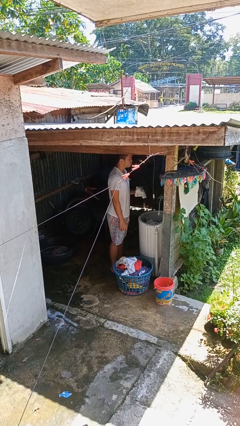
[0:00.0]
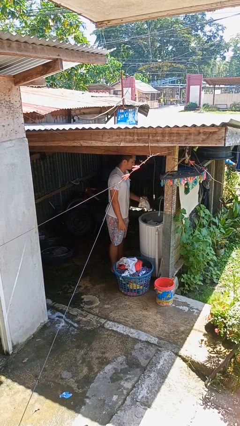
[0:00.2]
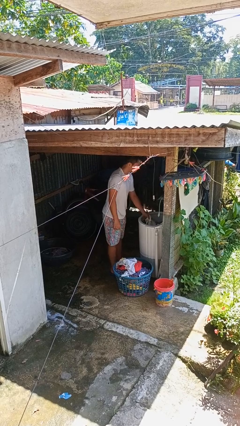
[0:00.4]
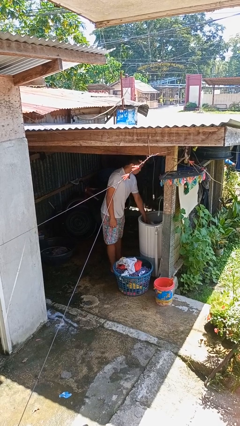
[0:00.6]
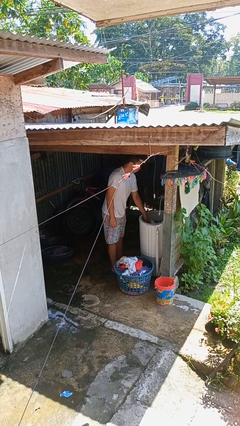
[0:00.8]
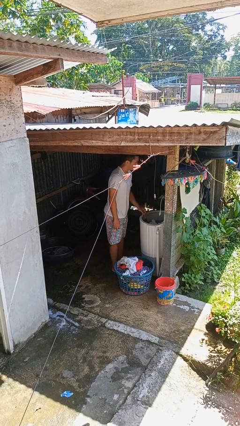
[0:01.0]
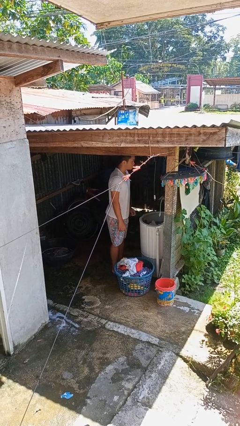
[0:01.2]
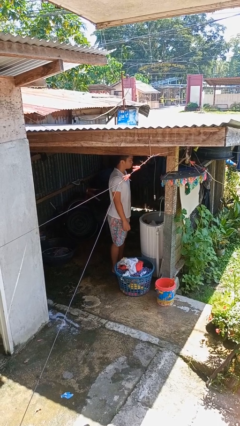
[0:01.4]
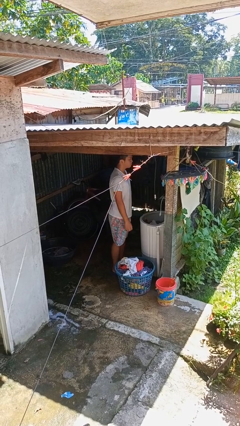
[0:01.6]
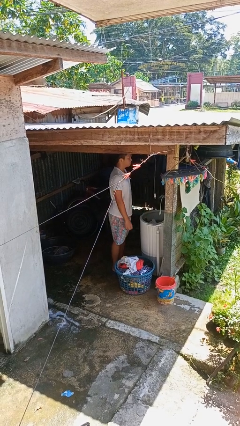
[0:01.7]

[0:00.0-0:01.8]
person loads clotheswasher

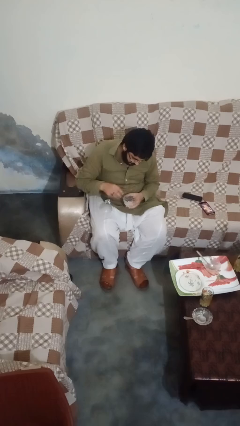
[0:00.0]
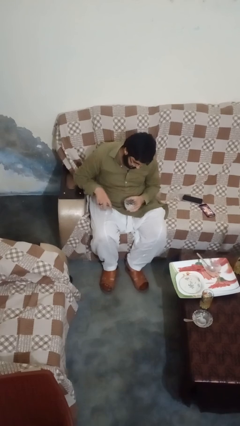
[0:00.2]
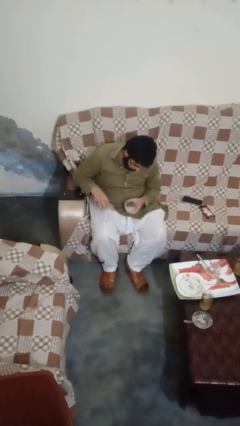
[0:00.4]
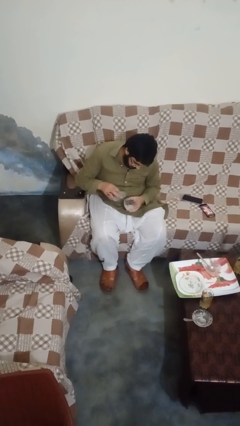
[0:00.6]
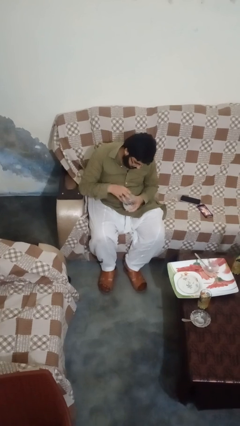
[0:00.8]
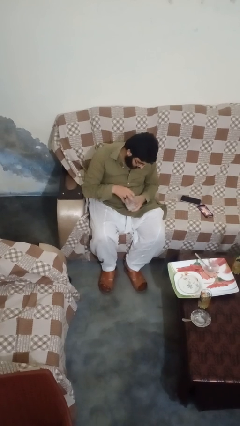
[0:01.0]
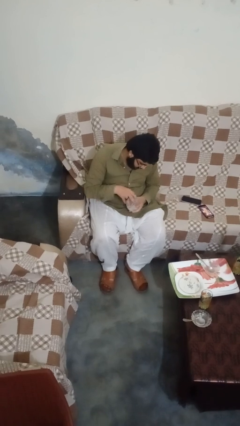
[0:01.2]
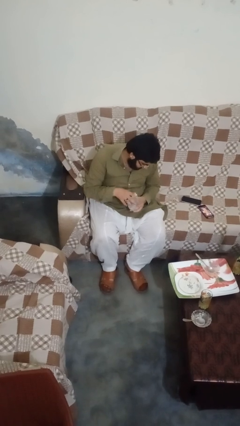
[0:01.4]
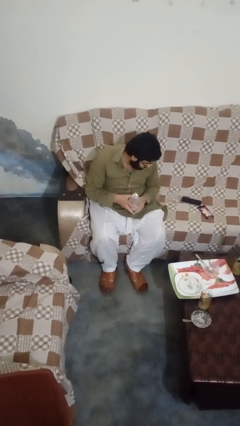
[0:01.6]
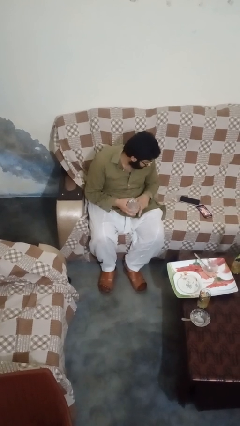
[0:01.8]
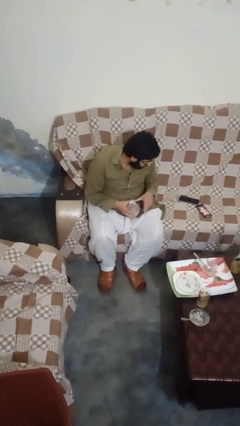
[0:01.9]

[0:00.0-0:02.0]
person closes jewelry box

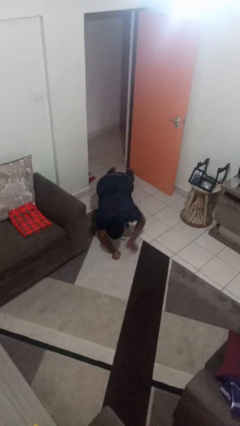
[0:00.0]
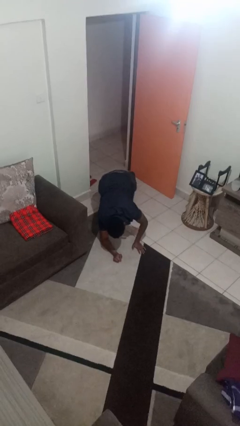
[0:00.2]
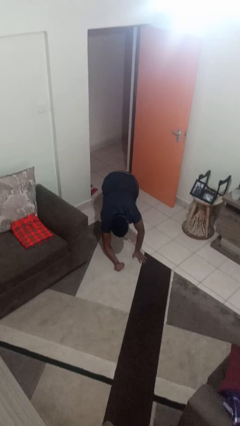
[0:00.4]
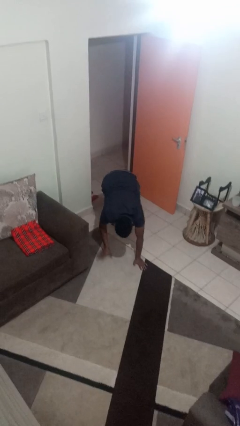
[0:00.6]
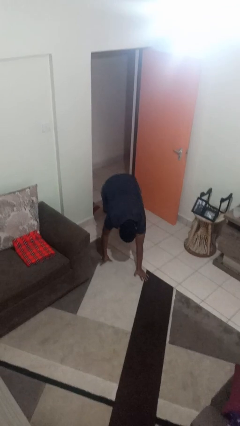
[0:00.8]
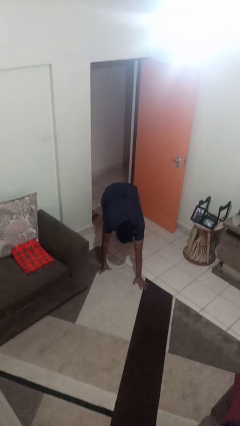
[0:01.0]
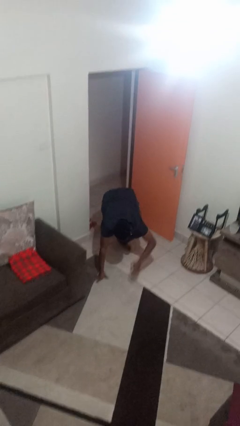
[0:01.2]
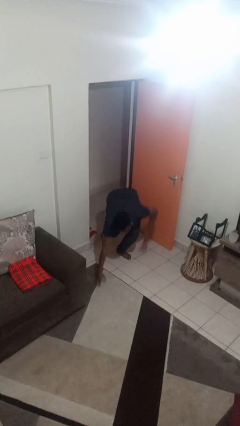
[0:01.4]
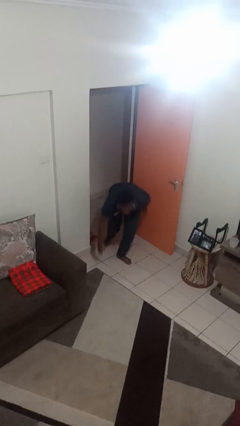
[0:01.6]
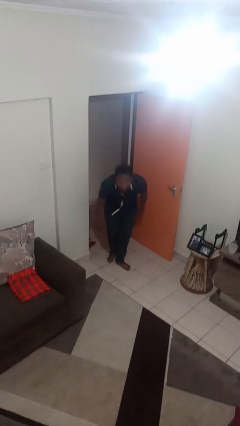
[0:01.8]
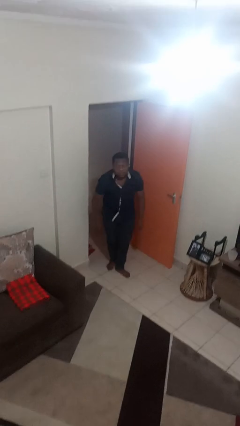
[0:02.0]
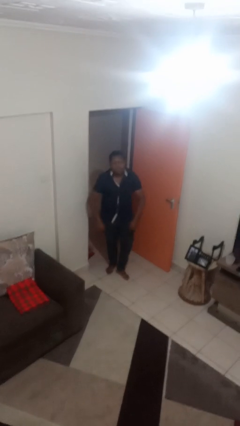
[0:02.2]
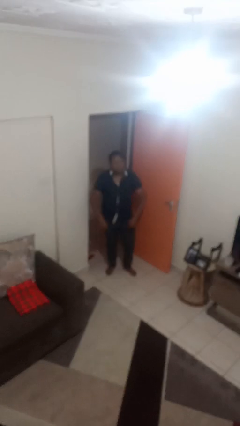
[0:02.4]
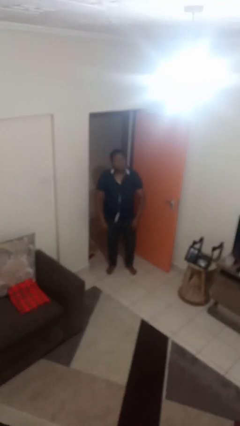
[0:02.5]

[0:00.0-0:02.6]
person stands up from floor

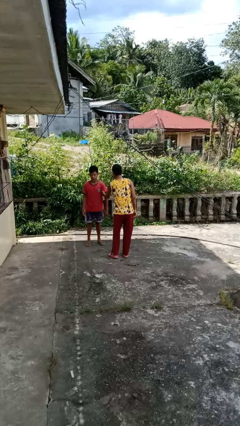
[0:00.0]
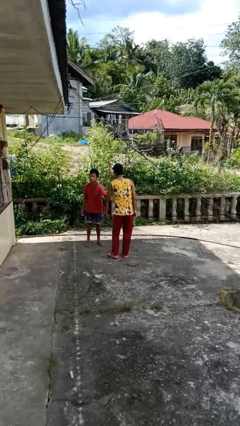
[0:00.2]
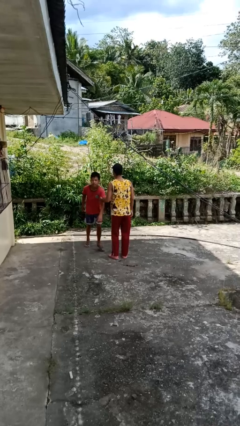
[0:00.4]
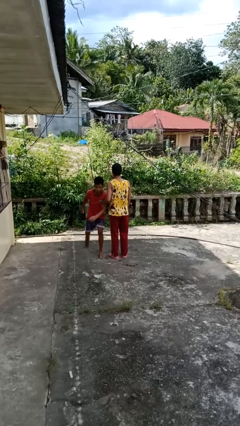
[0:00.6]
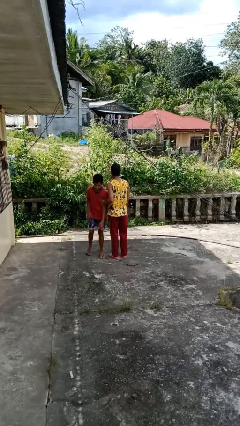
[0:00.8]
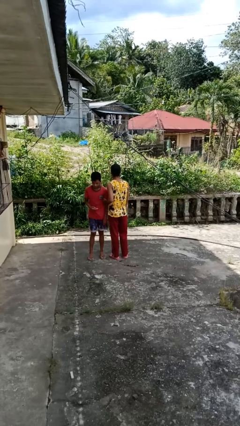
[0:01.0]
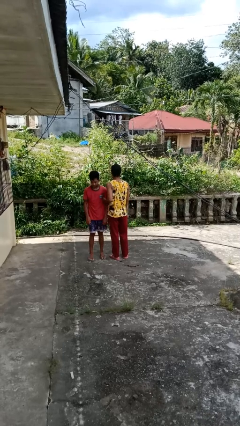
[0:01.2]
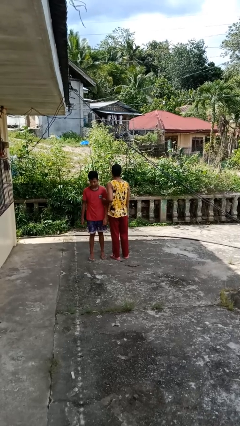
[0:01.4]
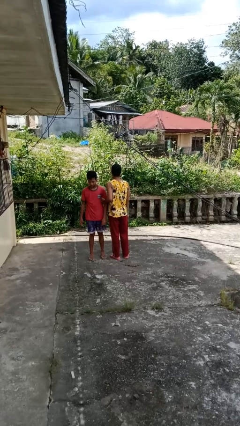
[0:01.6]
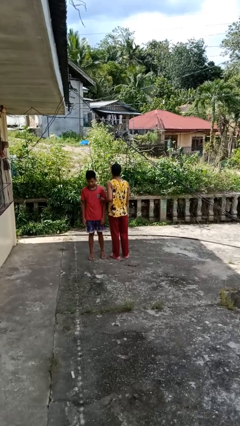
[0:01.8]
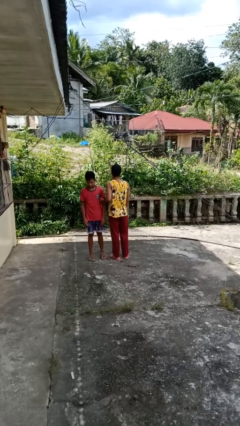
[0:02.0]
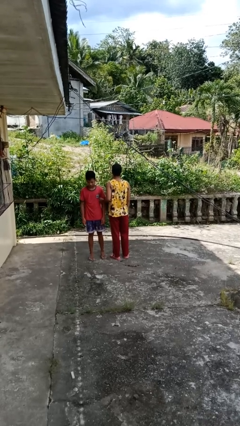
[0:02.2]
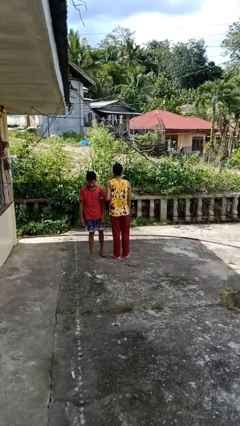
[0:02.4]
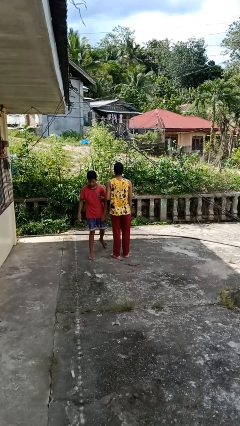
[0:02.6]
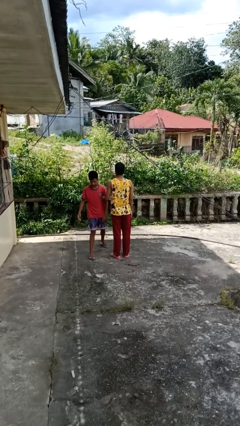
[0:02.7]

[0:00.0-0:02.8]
person grabs person by bicep

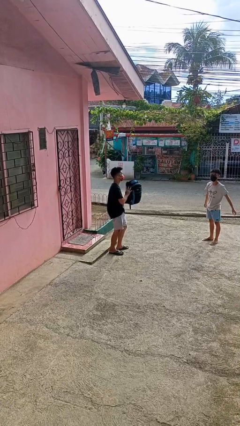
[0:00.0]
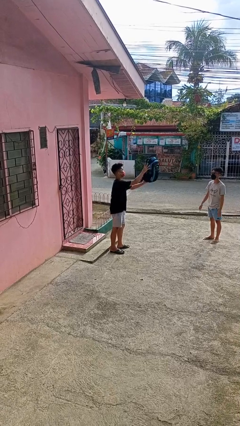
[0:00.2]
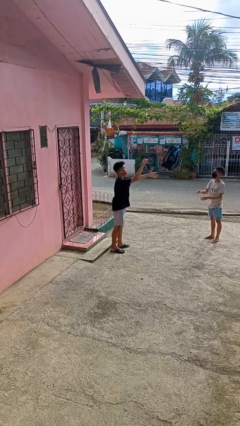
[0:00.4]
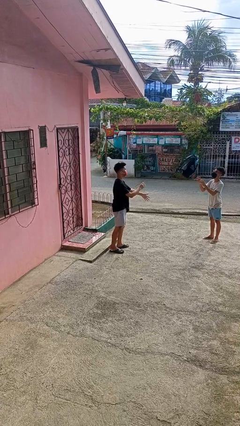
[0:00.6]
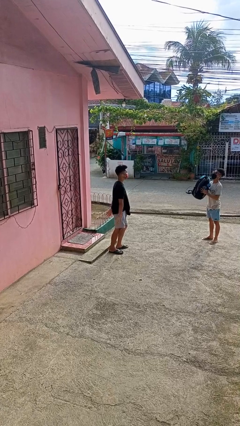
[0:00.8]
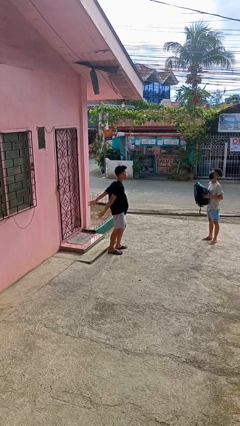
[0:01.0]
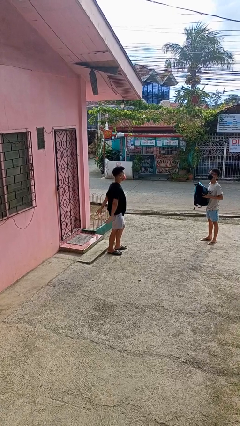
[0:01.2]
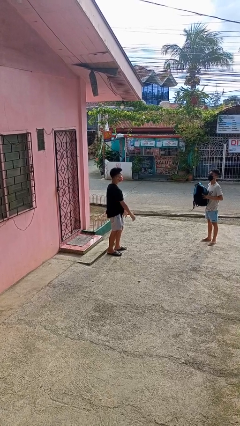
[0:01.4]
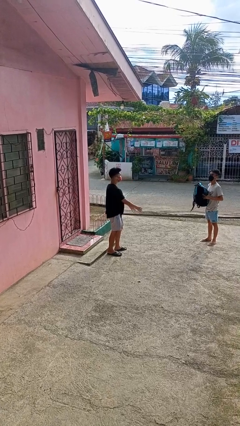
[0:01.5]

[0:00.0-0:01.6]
person throws object to person

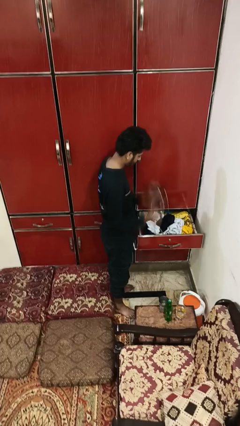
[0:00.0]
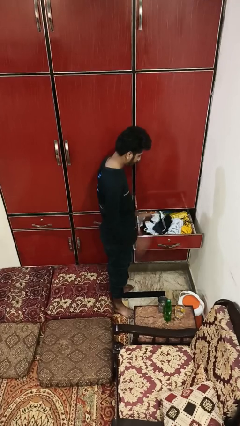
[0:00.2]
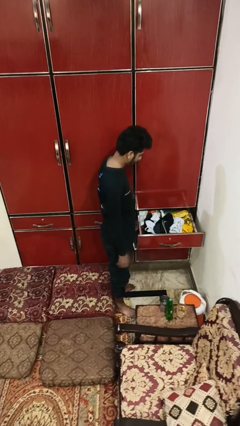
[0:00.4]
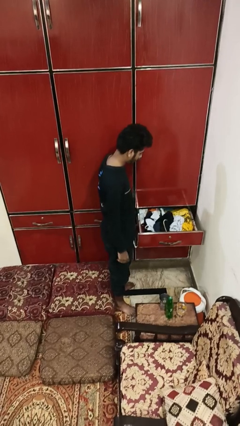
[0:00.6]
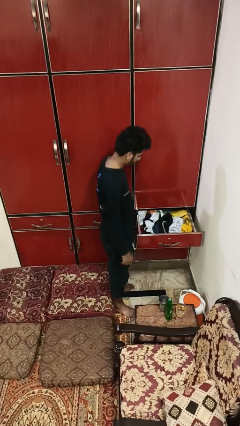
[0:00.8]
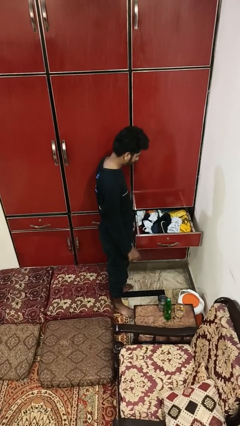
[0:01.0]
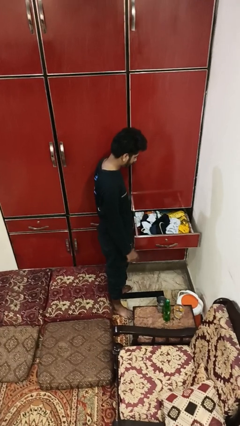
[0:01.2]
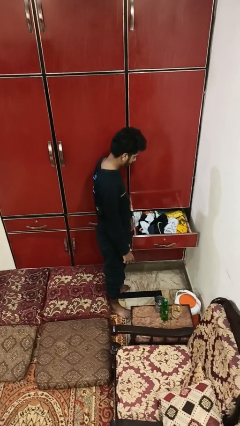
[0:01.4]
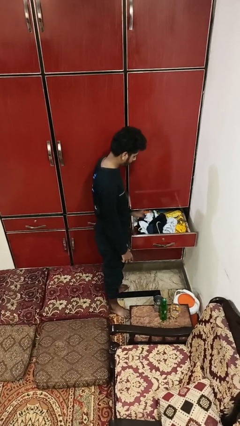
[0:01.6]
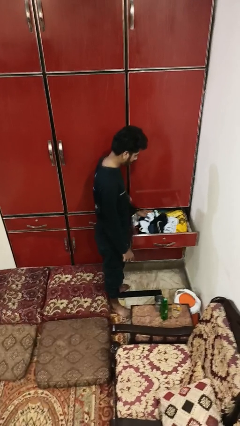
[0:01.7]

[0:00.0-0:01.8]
person puts clothes into dresser

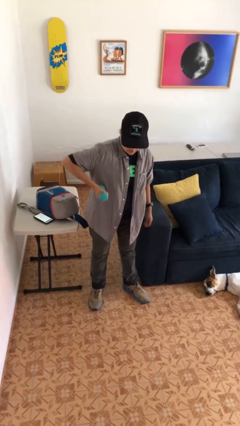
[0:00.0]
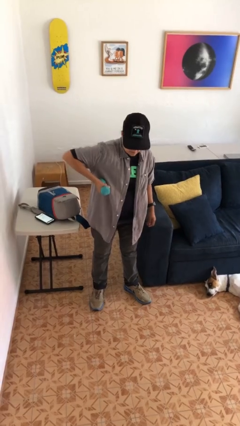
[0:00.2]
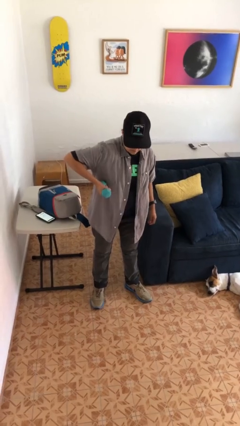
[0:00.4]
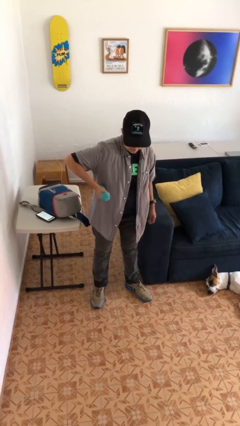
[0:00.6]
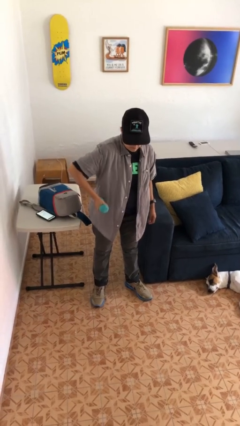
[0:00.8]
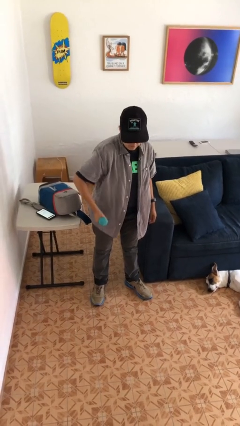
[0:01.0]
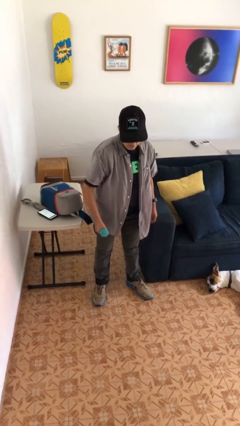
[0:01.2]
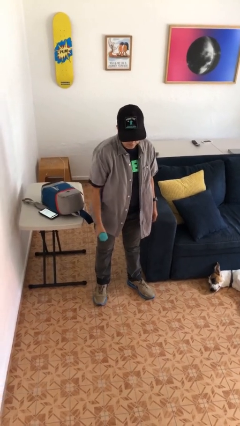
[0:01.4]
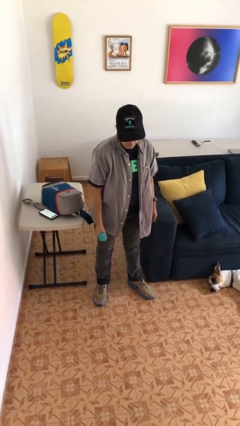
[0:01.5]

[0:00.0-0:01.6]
person lifts dumbbells

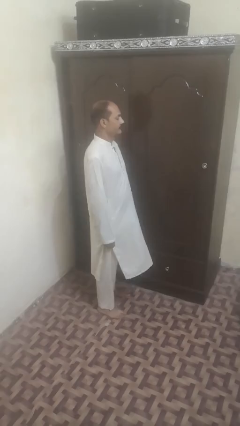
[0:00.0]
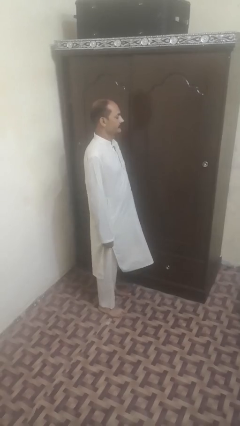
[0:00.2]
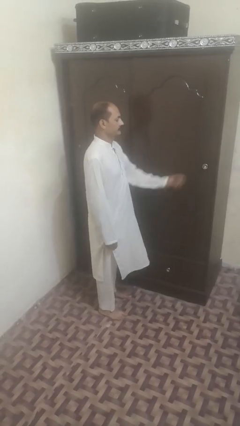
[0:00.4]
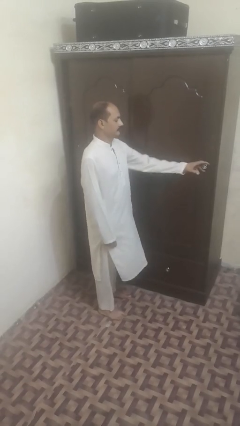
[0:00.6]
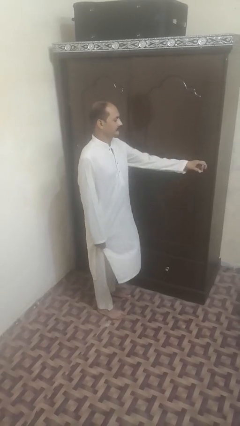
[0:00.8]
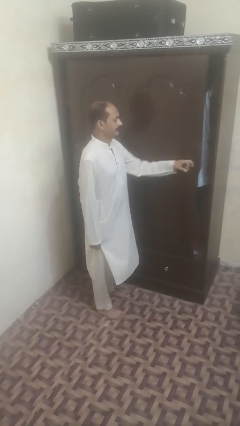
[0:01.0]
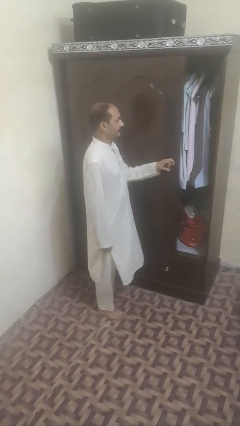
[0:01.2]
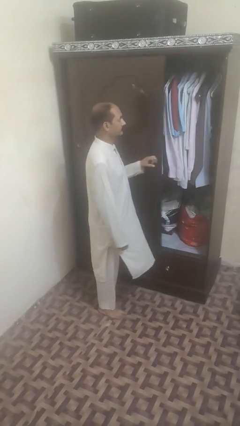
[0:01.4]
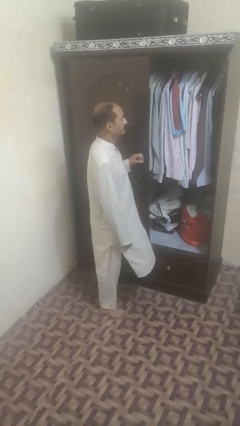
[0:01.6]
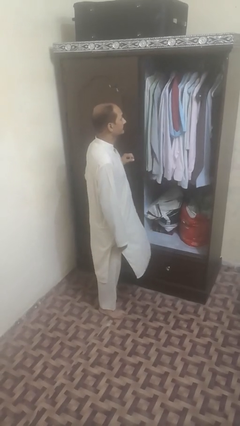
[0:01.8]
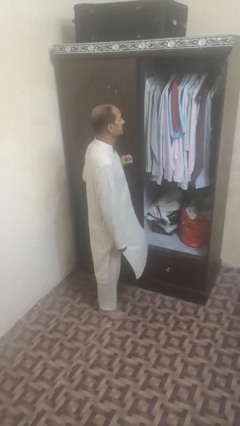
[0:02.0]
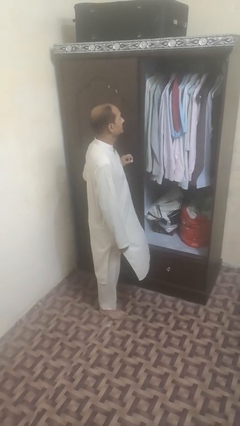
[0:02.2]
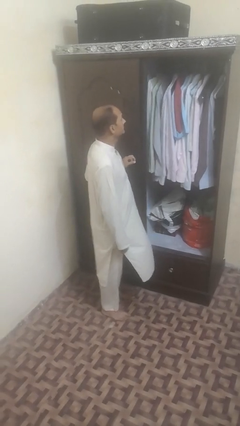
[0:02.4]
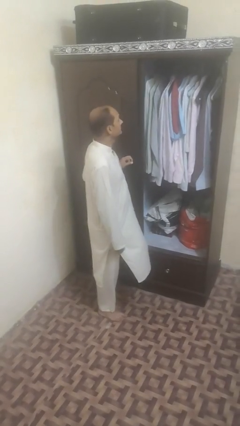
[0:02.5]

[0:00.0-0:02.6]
person opens sliding door
